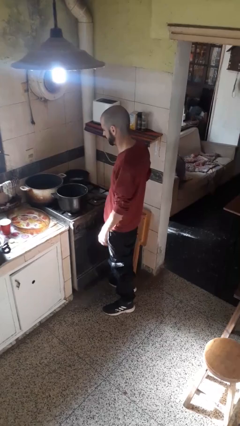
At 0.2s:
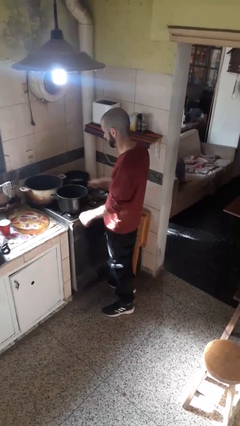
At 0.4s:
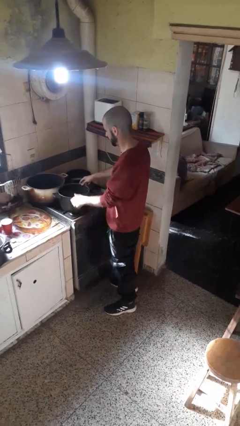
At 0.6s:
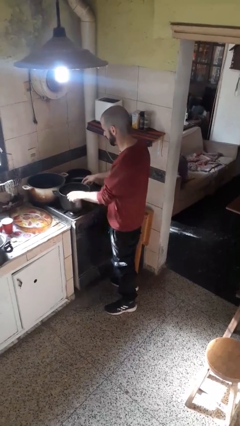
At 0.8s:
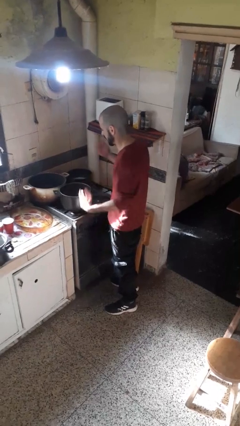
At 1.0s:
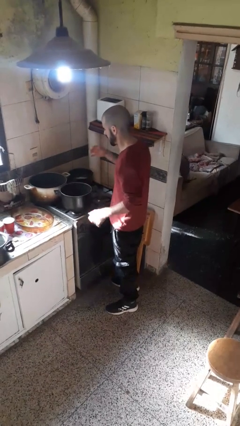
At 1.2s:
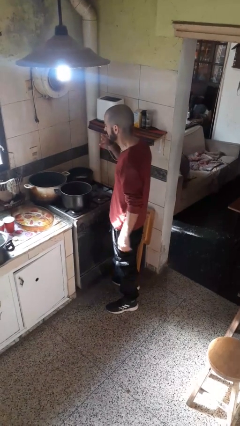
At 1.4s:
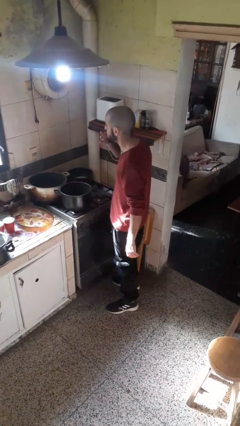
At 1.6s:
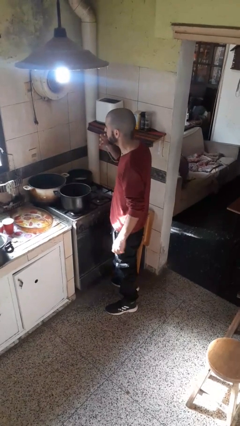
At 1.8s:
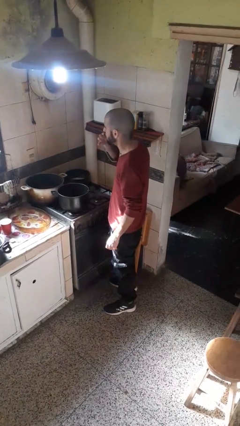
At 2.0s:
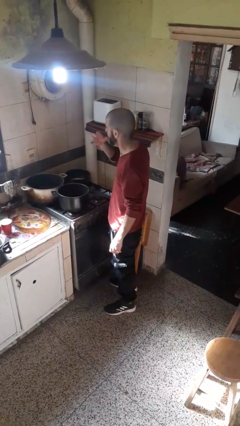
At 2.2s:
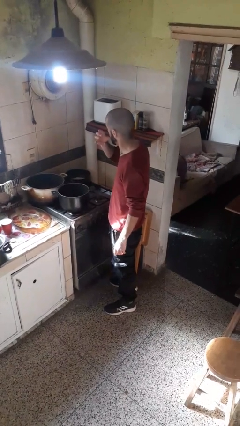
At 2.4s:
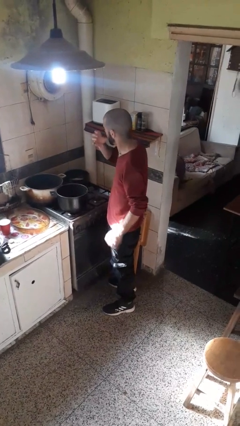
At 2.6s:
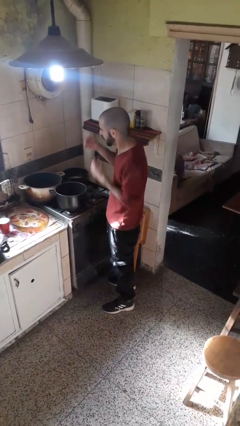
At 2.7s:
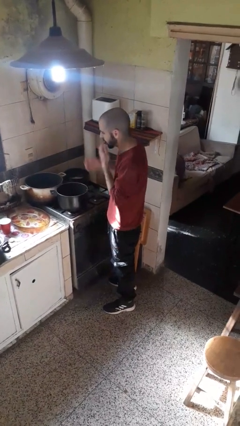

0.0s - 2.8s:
person burns hand

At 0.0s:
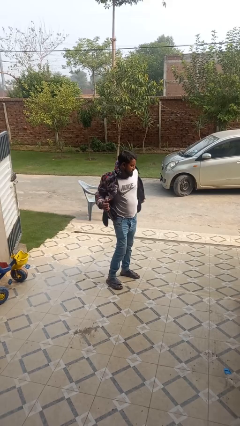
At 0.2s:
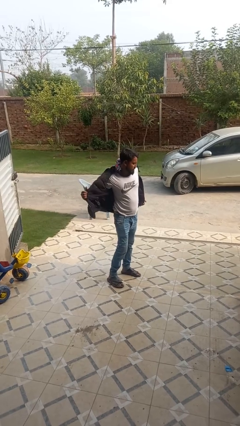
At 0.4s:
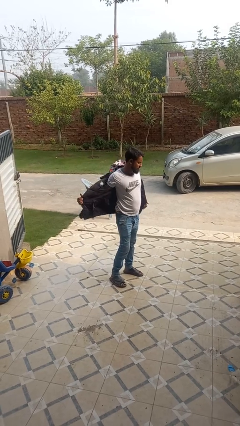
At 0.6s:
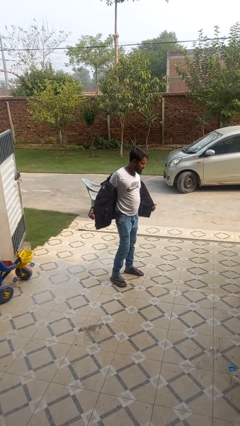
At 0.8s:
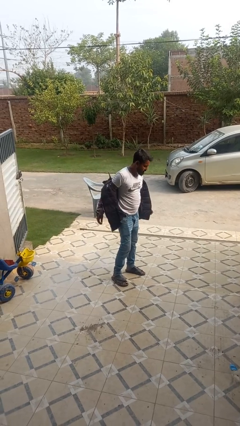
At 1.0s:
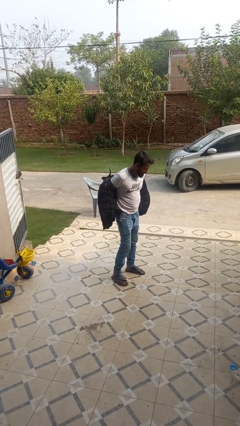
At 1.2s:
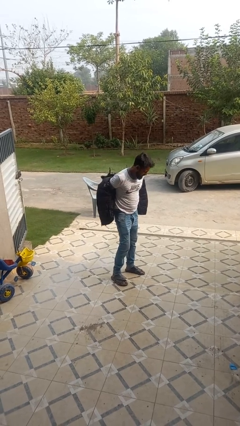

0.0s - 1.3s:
person takes off jacket

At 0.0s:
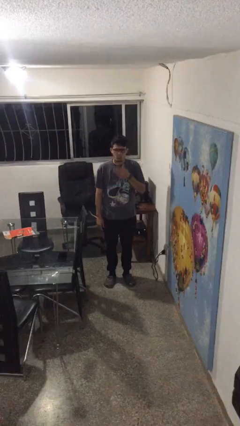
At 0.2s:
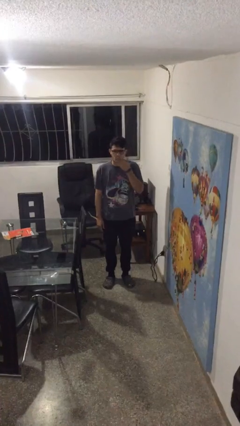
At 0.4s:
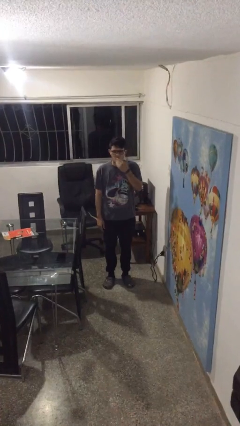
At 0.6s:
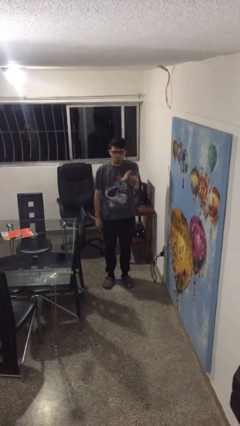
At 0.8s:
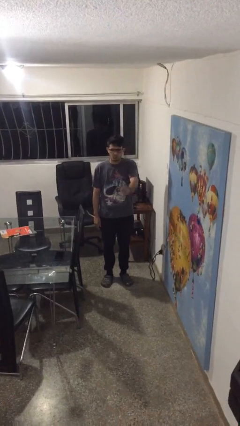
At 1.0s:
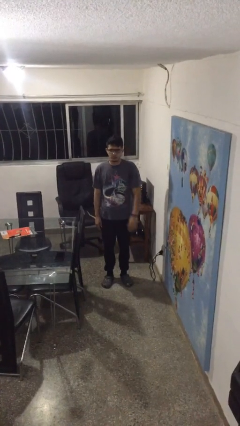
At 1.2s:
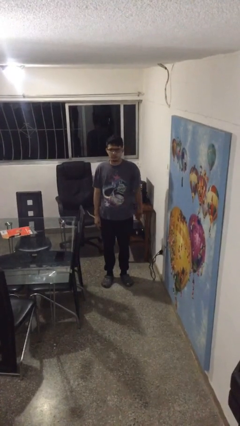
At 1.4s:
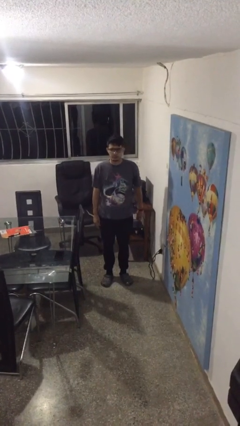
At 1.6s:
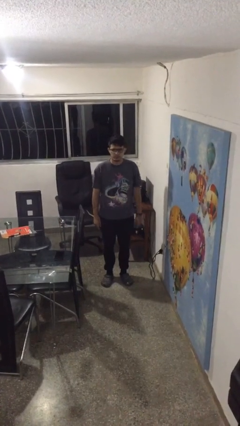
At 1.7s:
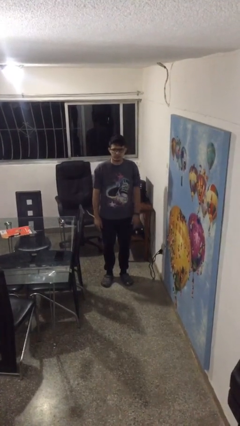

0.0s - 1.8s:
person gestures blow kiss

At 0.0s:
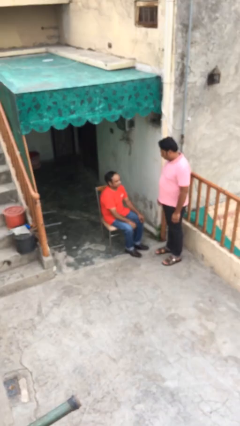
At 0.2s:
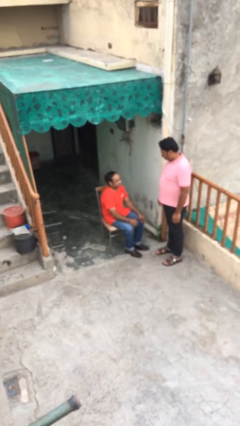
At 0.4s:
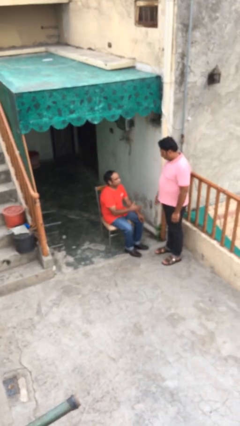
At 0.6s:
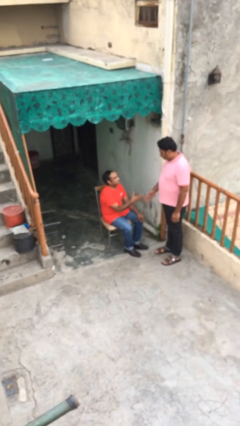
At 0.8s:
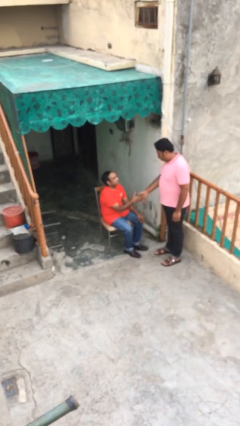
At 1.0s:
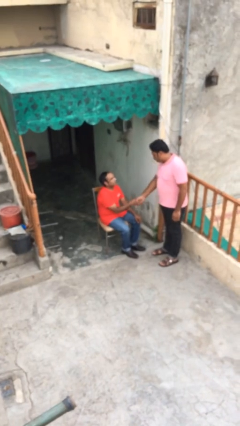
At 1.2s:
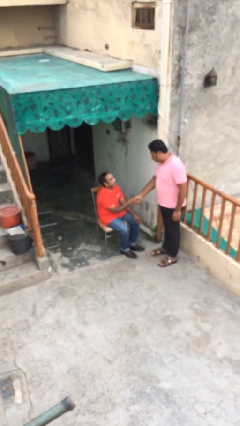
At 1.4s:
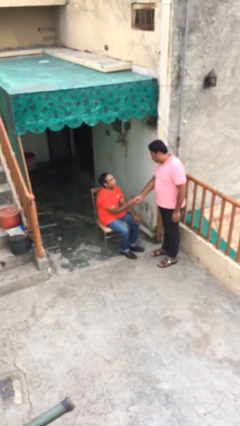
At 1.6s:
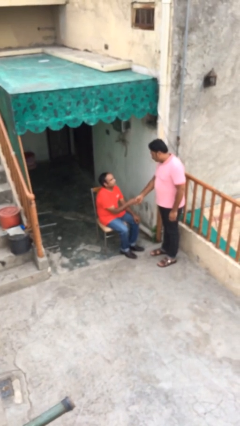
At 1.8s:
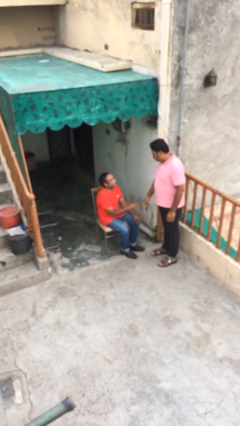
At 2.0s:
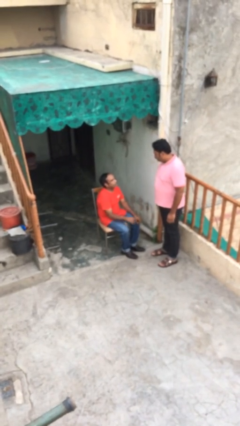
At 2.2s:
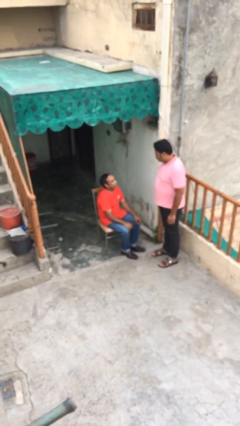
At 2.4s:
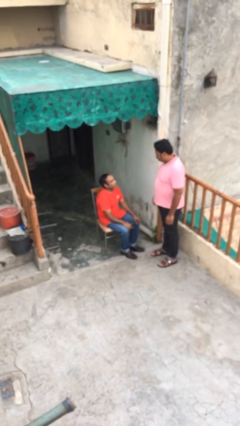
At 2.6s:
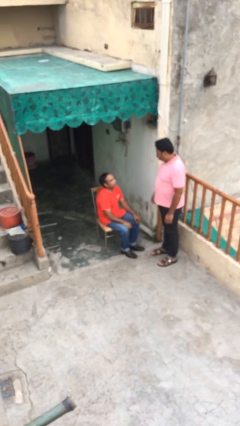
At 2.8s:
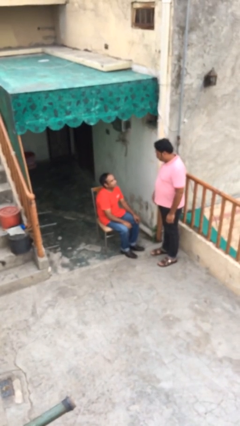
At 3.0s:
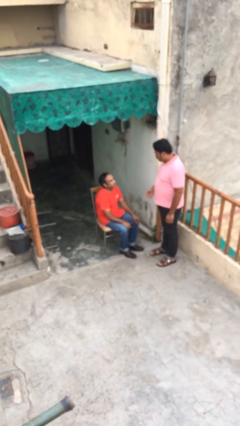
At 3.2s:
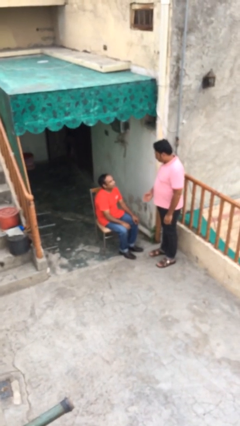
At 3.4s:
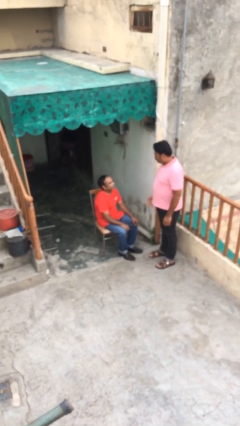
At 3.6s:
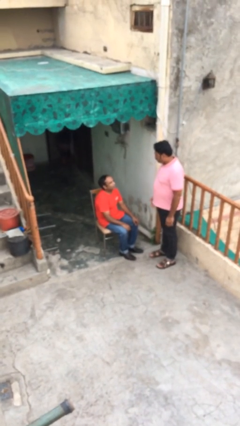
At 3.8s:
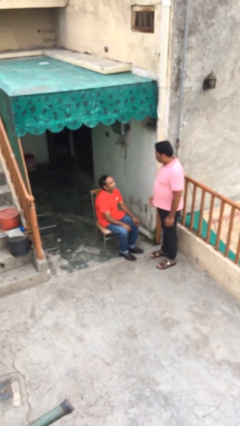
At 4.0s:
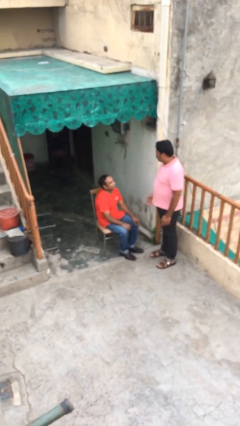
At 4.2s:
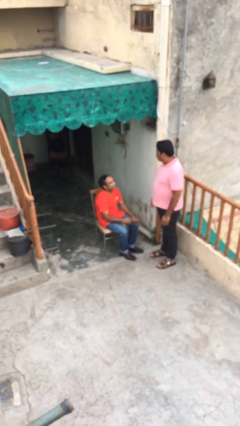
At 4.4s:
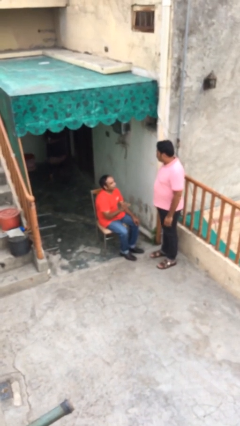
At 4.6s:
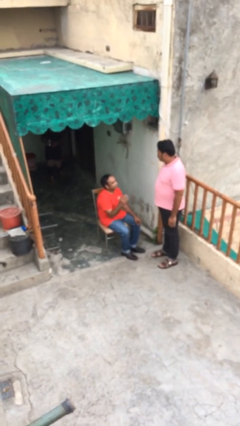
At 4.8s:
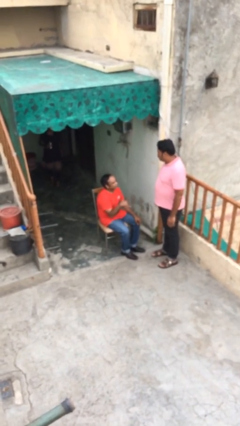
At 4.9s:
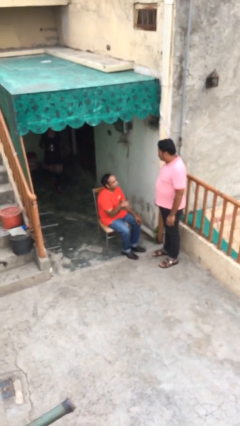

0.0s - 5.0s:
person shakes hand

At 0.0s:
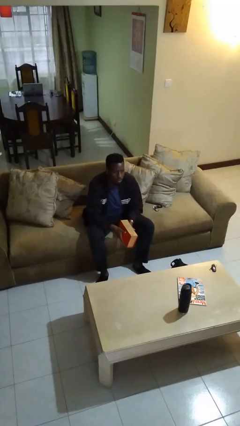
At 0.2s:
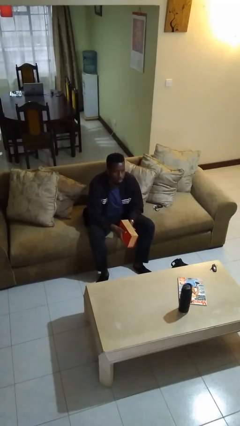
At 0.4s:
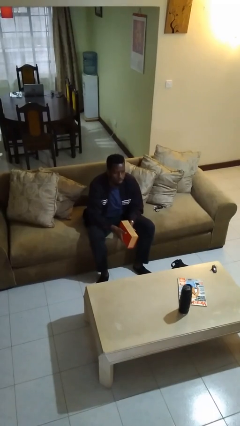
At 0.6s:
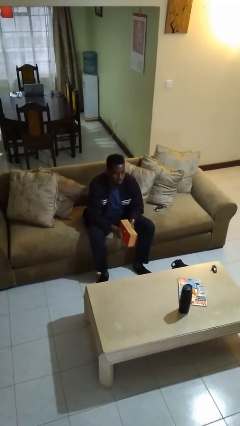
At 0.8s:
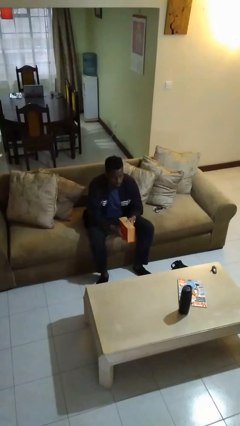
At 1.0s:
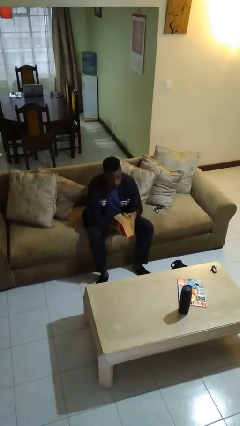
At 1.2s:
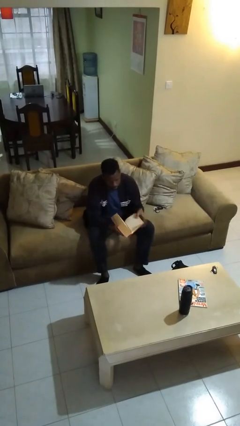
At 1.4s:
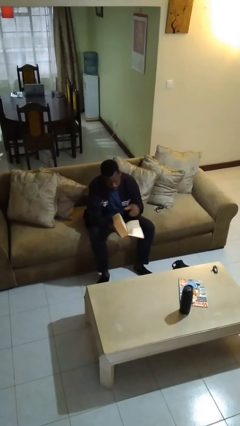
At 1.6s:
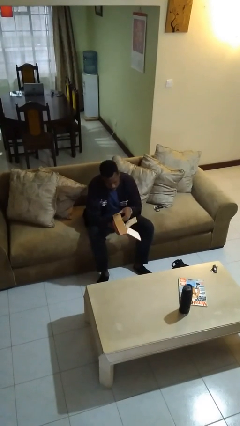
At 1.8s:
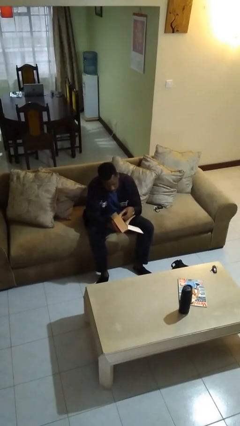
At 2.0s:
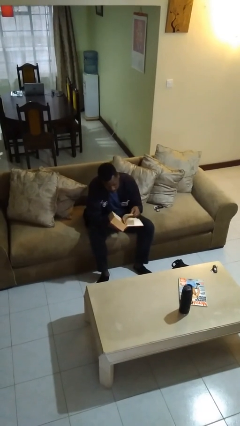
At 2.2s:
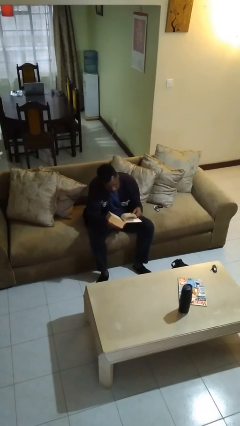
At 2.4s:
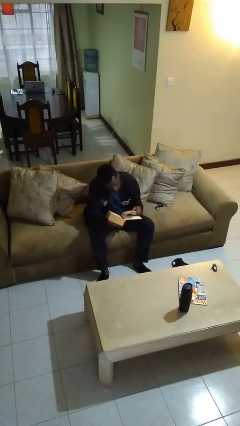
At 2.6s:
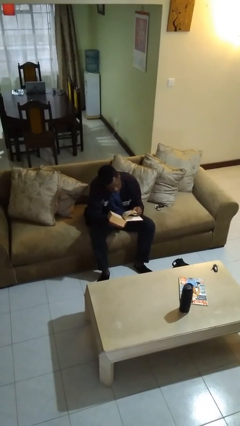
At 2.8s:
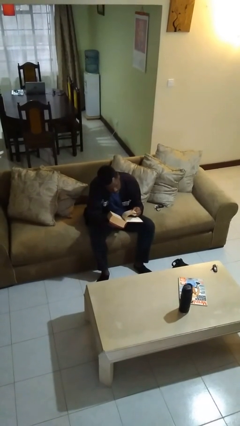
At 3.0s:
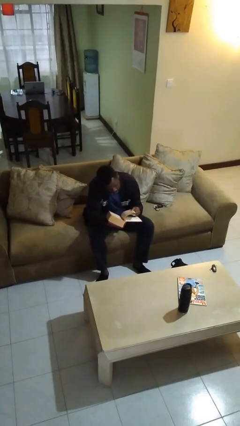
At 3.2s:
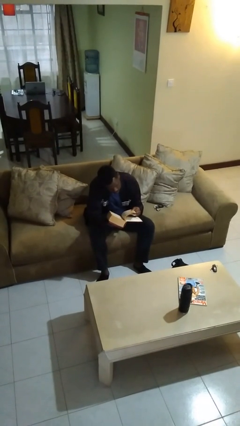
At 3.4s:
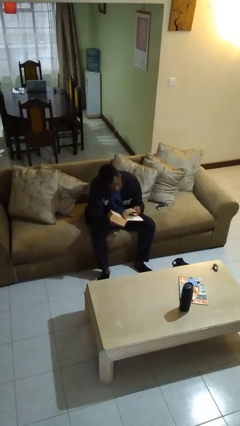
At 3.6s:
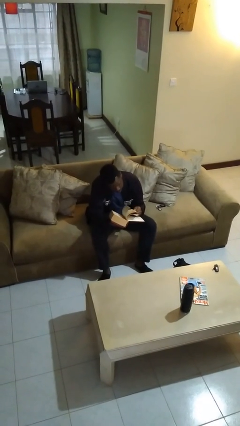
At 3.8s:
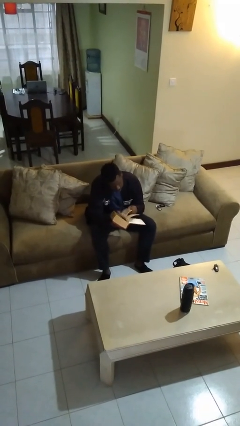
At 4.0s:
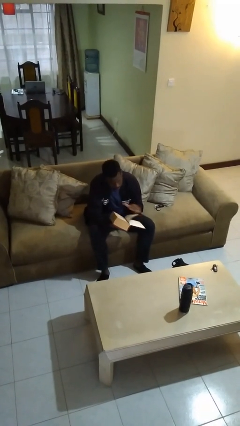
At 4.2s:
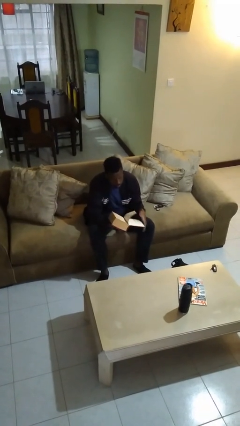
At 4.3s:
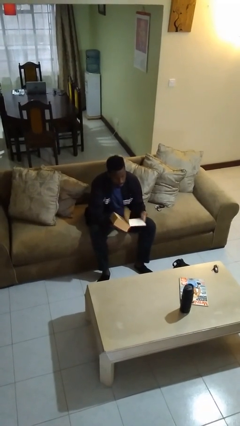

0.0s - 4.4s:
person reads book

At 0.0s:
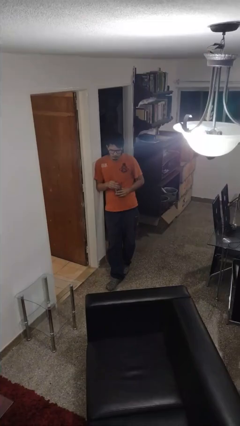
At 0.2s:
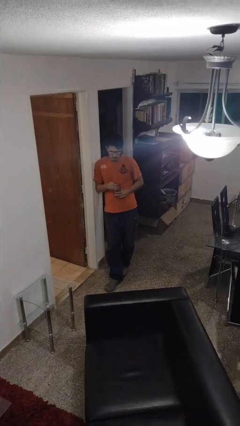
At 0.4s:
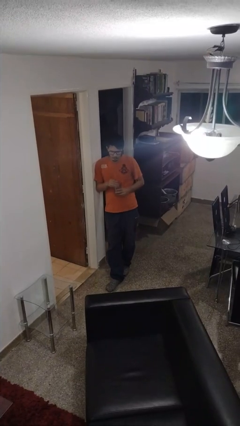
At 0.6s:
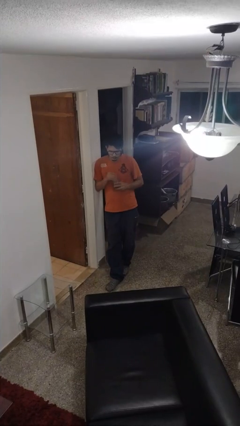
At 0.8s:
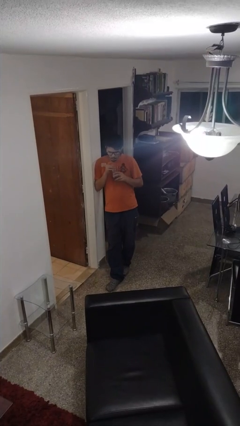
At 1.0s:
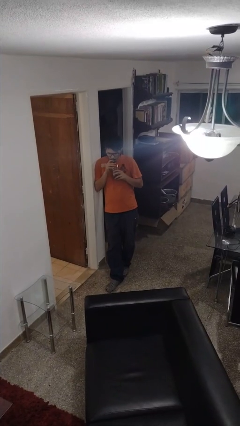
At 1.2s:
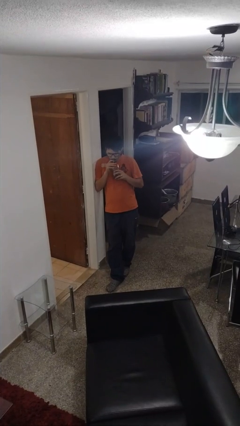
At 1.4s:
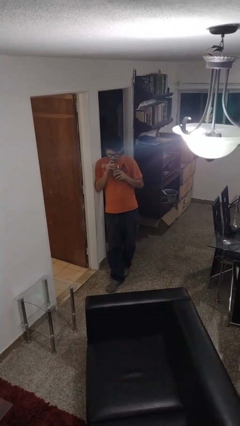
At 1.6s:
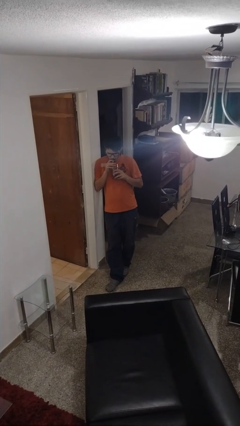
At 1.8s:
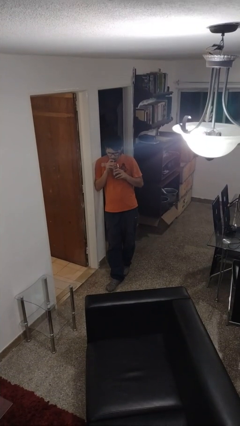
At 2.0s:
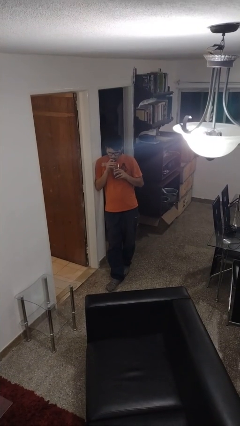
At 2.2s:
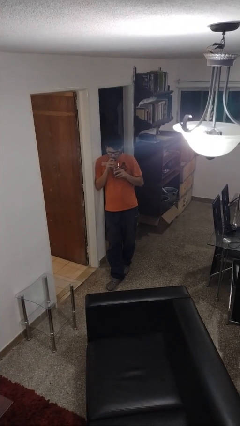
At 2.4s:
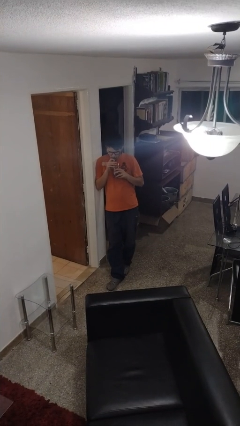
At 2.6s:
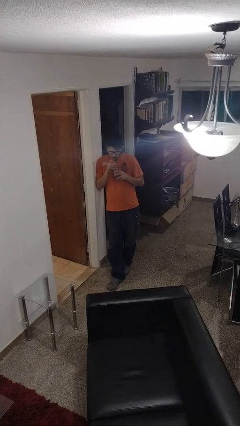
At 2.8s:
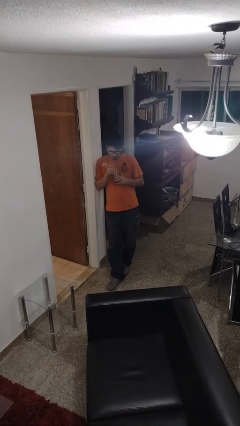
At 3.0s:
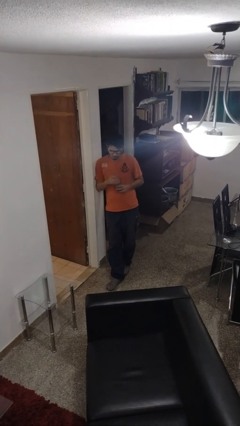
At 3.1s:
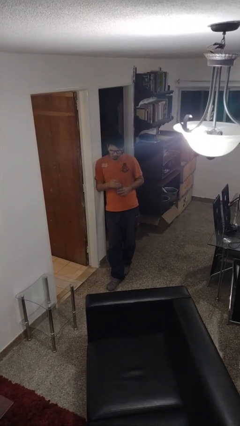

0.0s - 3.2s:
person drinks from straw
